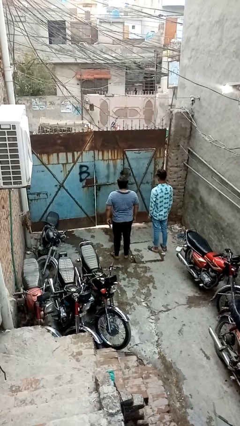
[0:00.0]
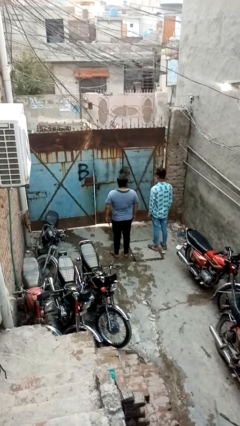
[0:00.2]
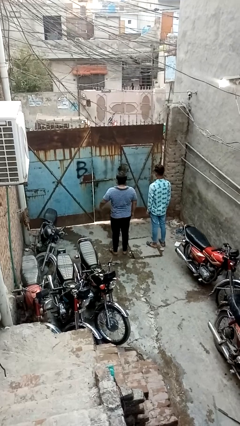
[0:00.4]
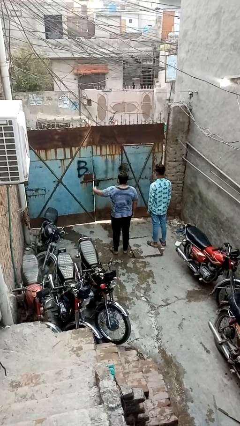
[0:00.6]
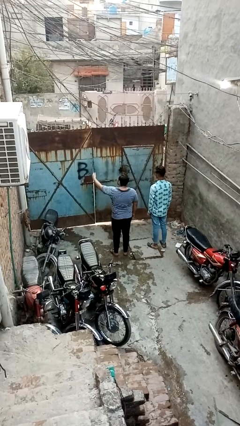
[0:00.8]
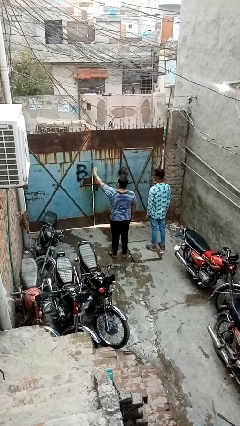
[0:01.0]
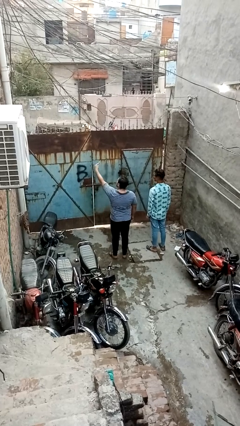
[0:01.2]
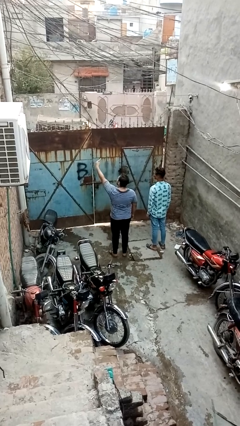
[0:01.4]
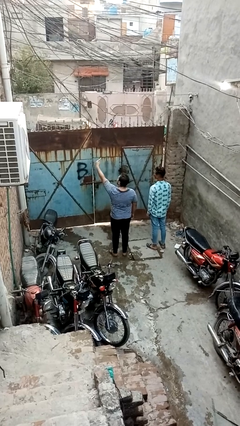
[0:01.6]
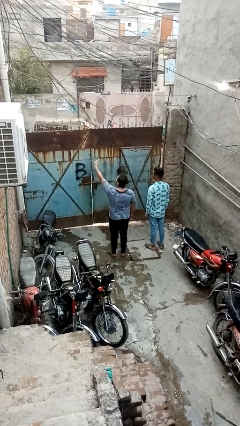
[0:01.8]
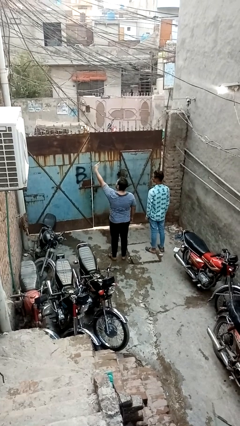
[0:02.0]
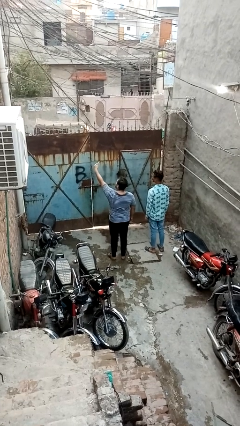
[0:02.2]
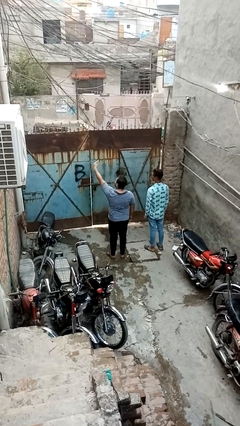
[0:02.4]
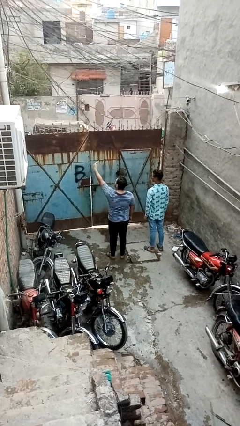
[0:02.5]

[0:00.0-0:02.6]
person takes selfie with person

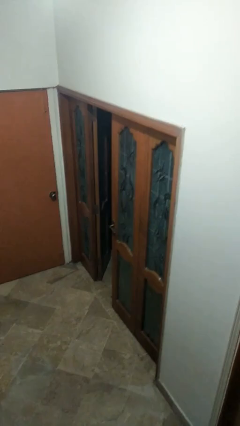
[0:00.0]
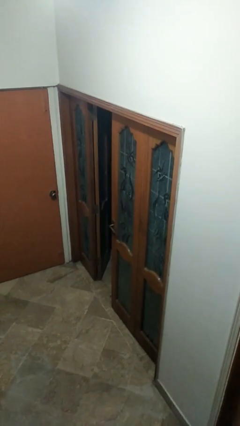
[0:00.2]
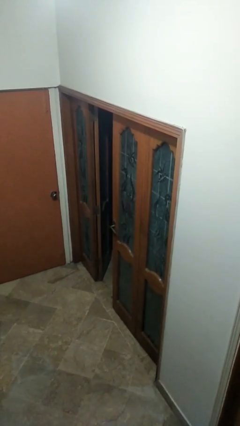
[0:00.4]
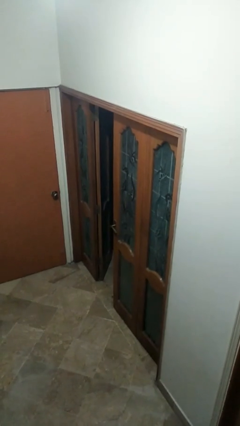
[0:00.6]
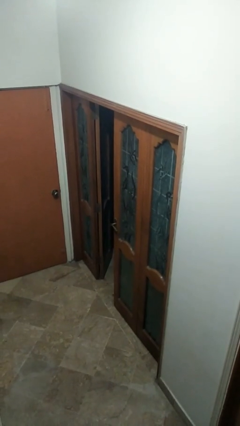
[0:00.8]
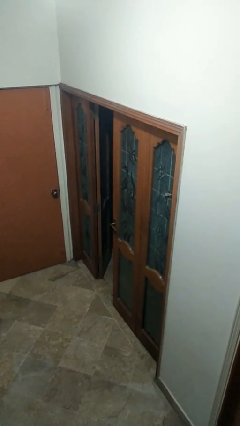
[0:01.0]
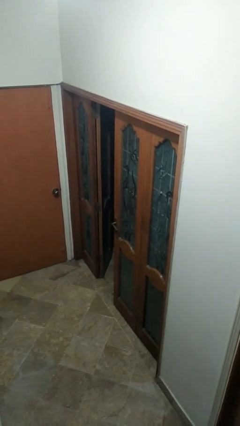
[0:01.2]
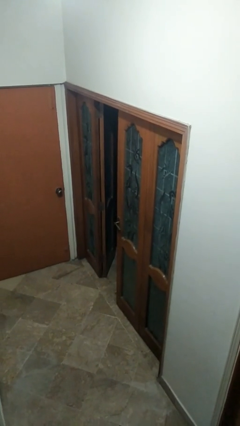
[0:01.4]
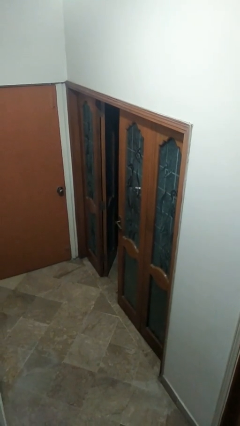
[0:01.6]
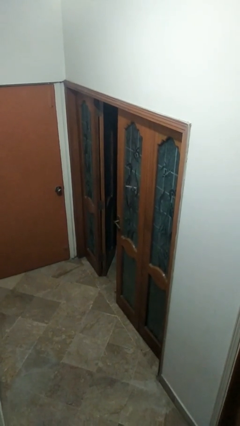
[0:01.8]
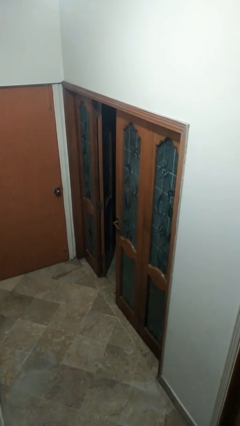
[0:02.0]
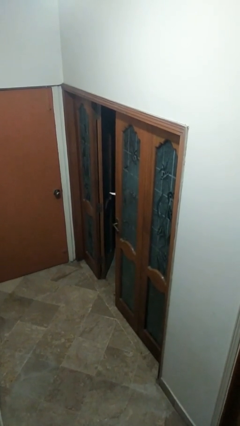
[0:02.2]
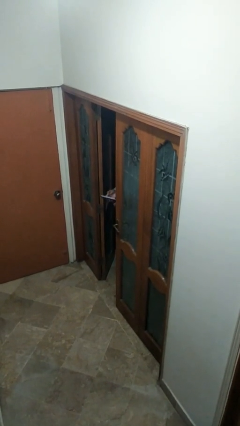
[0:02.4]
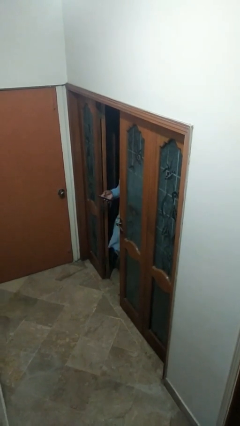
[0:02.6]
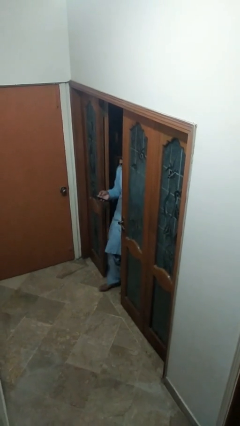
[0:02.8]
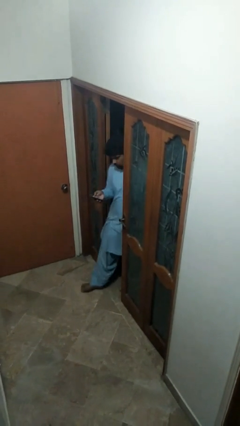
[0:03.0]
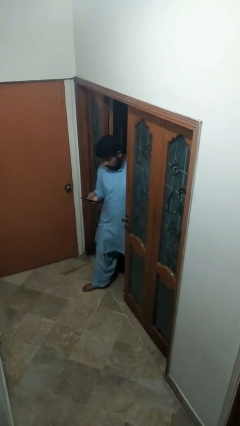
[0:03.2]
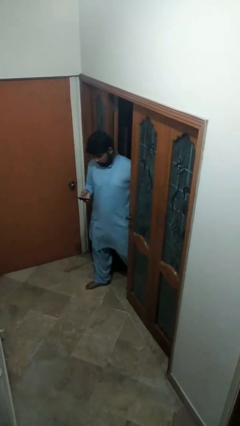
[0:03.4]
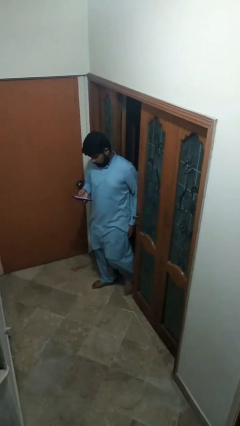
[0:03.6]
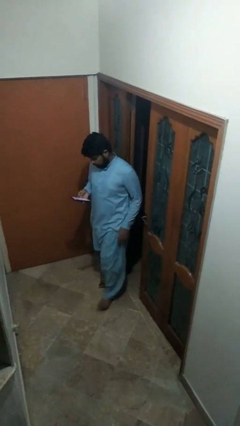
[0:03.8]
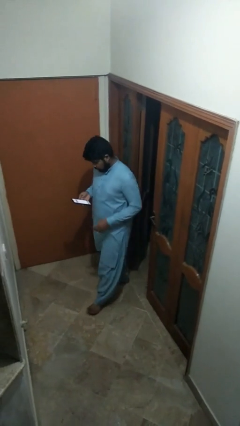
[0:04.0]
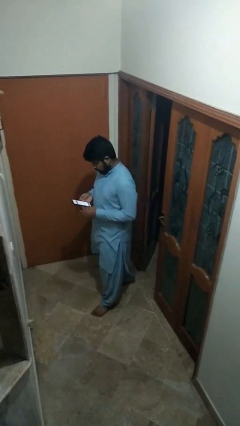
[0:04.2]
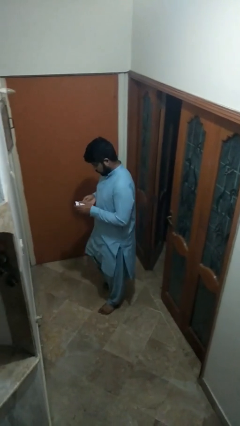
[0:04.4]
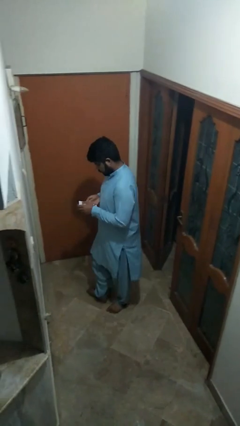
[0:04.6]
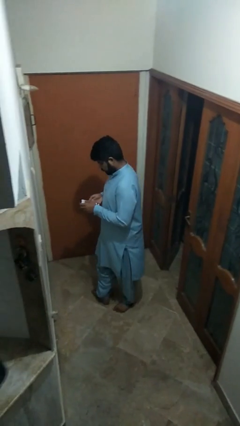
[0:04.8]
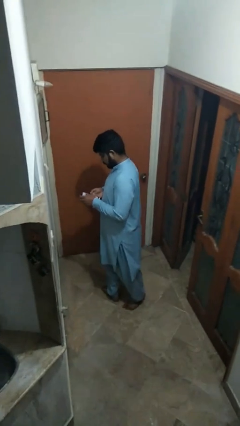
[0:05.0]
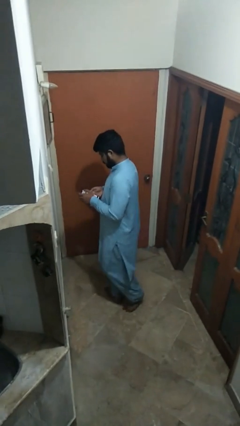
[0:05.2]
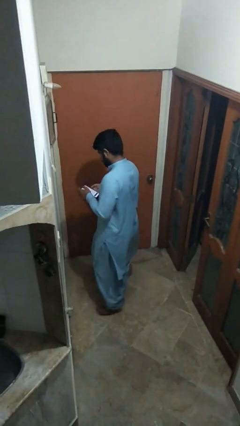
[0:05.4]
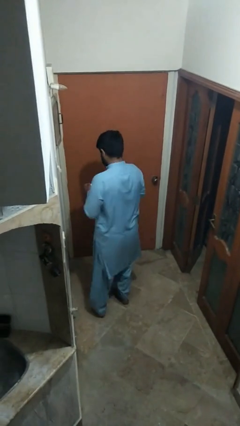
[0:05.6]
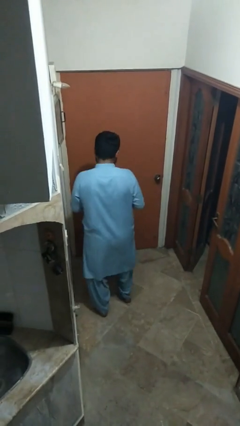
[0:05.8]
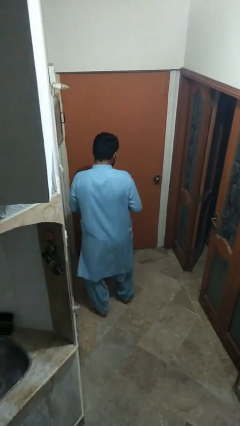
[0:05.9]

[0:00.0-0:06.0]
person enters scene through structure

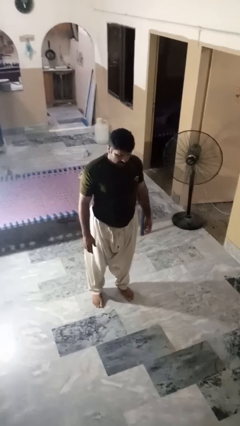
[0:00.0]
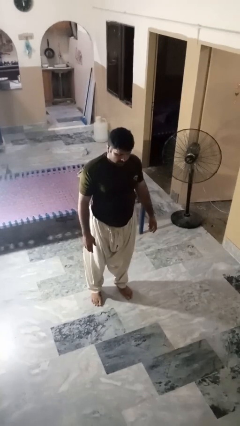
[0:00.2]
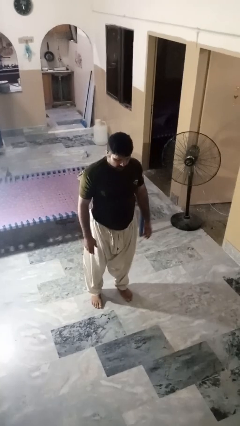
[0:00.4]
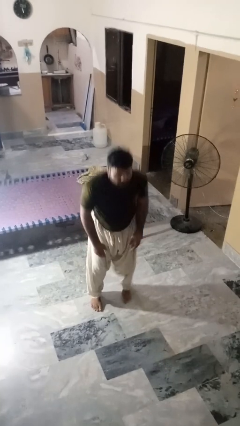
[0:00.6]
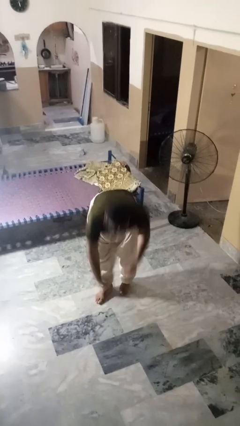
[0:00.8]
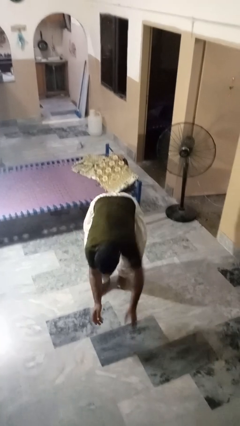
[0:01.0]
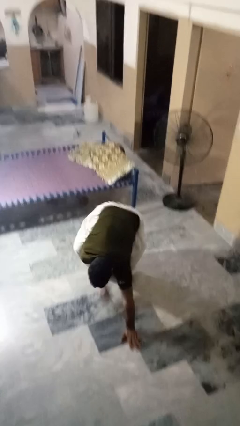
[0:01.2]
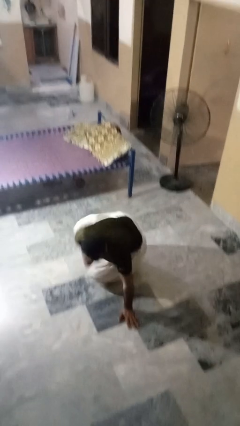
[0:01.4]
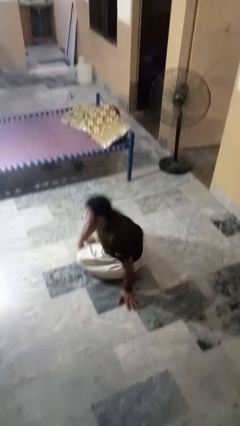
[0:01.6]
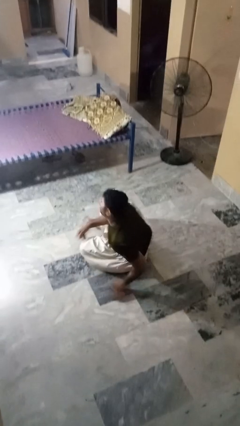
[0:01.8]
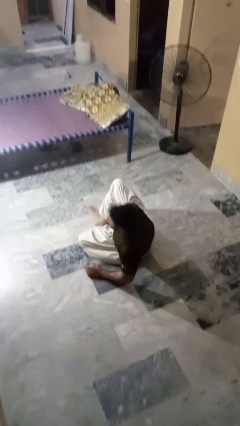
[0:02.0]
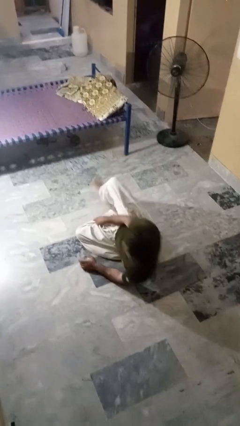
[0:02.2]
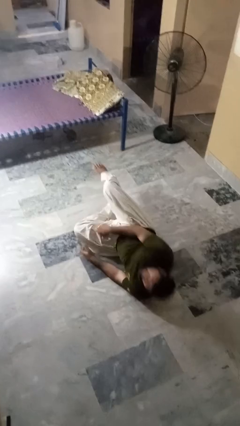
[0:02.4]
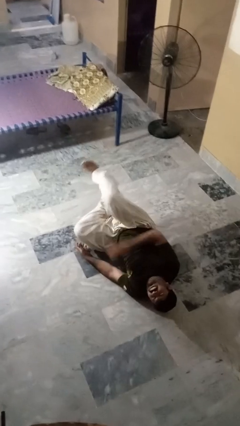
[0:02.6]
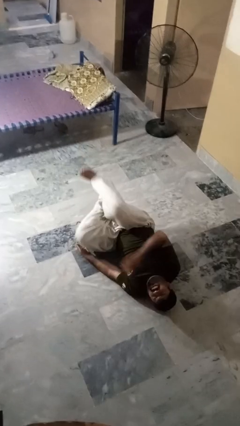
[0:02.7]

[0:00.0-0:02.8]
person falls while standing

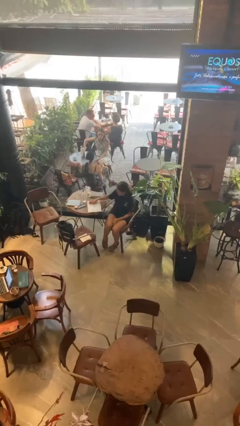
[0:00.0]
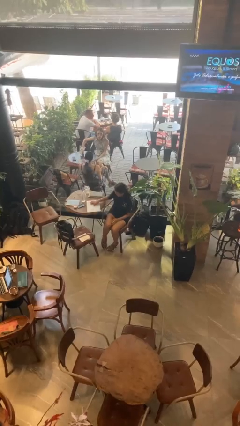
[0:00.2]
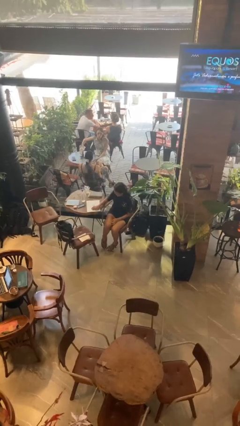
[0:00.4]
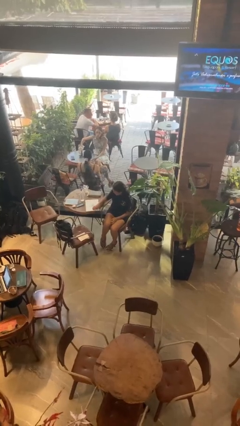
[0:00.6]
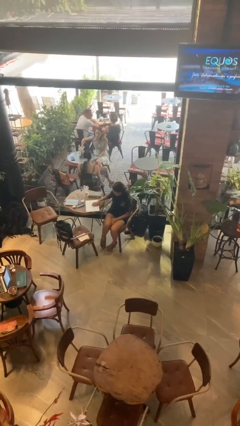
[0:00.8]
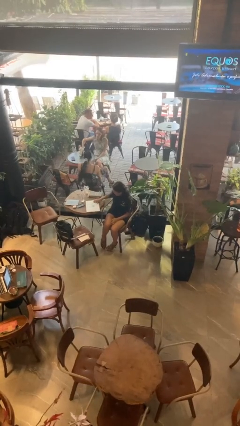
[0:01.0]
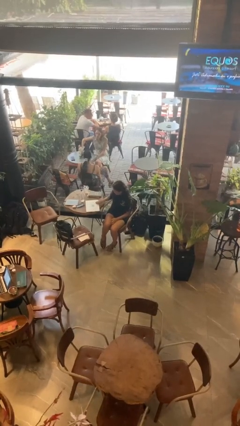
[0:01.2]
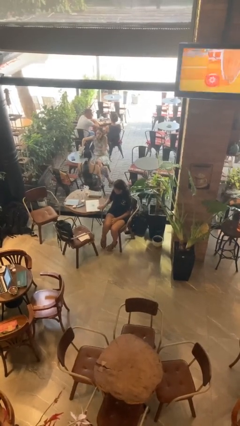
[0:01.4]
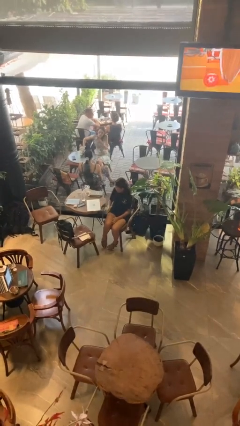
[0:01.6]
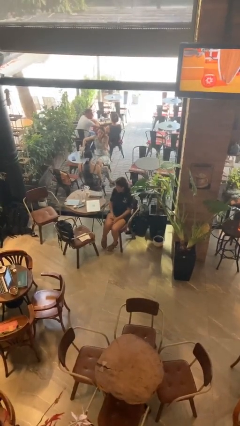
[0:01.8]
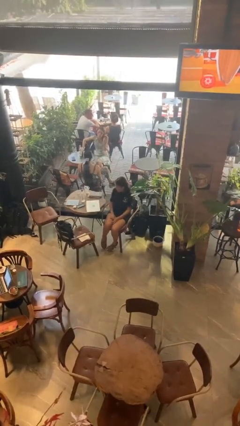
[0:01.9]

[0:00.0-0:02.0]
person waves hand over object

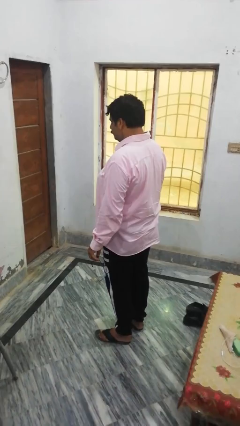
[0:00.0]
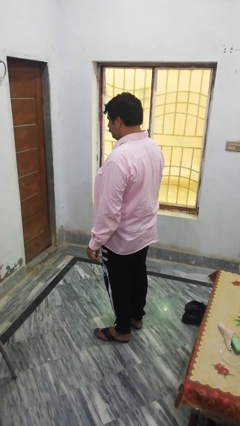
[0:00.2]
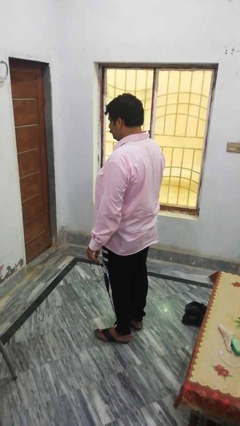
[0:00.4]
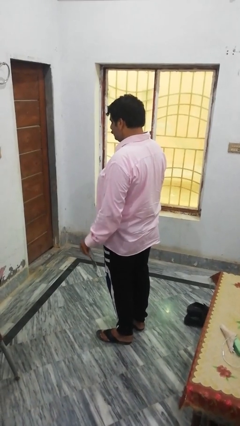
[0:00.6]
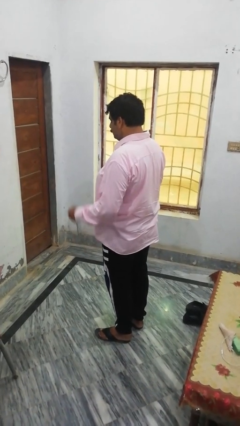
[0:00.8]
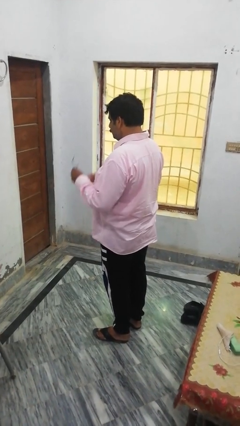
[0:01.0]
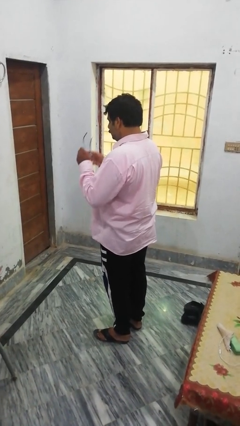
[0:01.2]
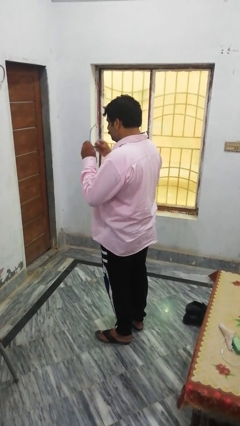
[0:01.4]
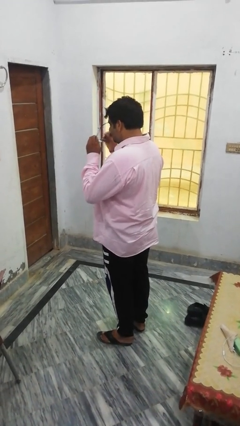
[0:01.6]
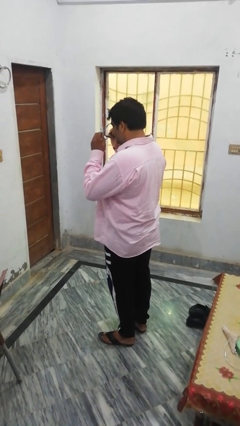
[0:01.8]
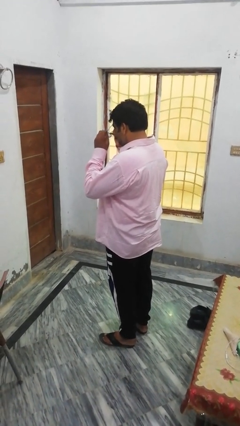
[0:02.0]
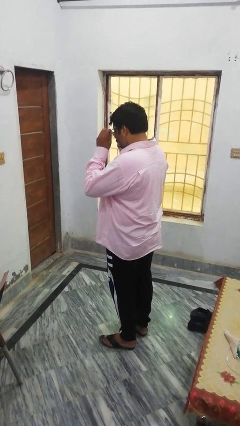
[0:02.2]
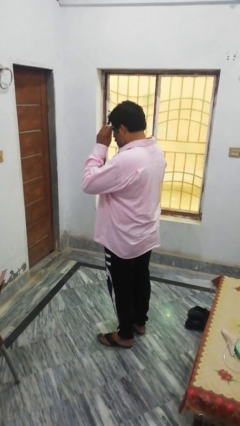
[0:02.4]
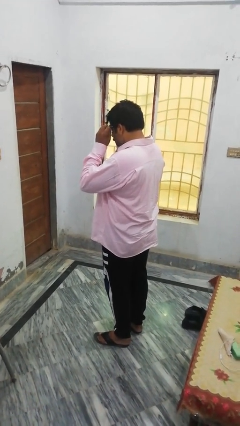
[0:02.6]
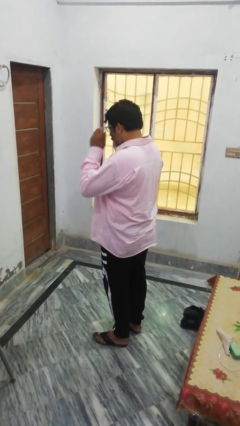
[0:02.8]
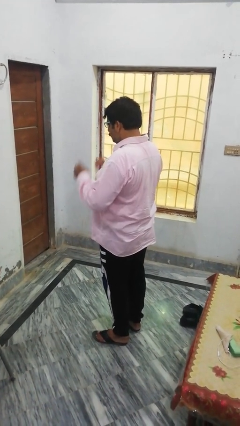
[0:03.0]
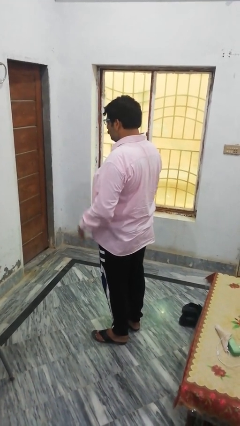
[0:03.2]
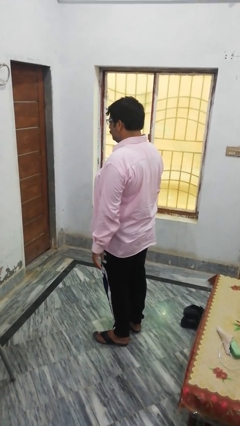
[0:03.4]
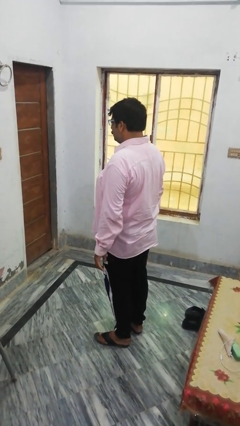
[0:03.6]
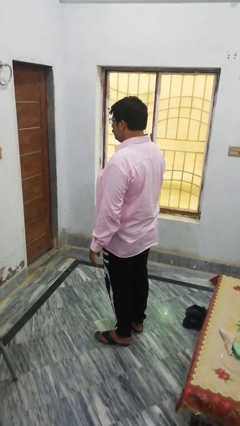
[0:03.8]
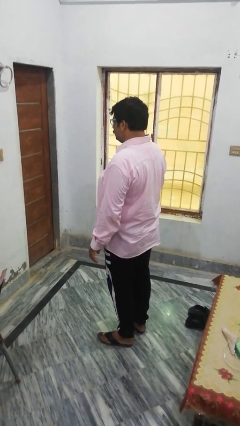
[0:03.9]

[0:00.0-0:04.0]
person puts on glasses
